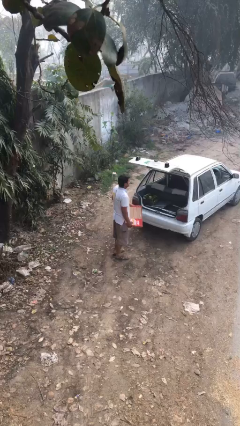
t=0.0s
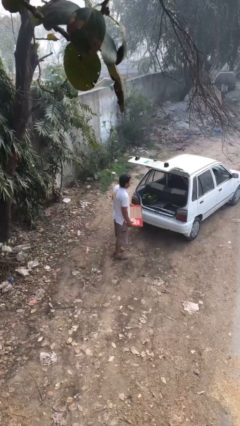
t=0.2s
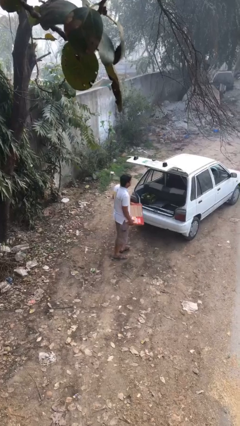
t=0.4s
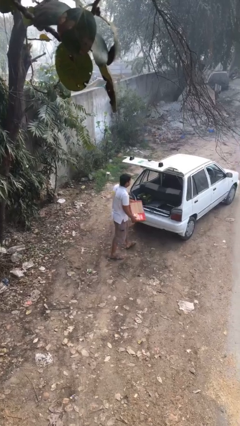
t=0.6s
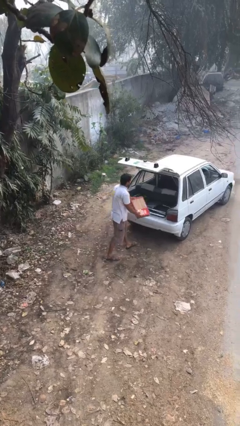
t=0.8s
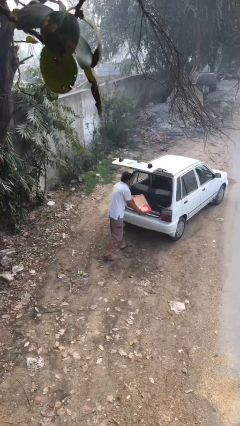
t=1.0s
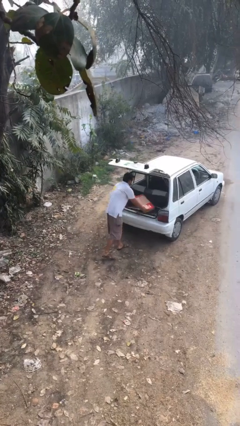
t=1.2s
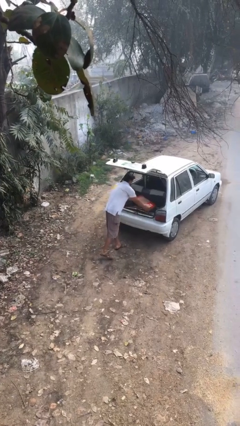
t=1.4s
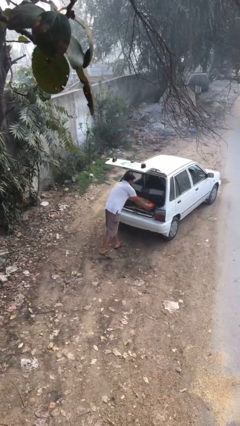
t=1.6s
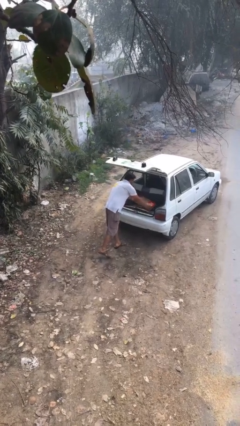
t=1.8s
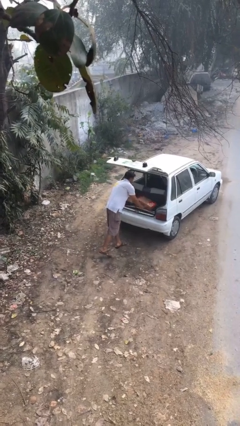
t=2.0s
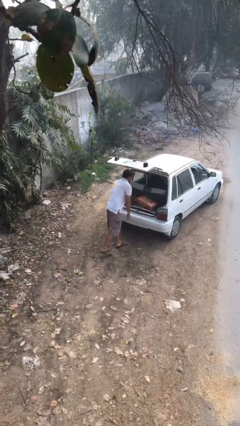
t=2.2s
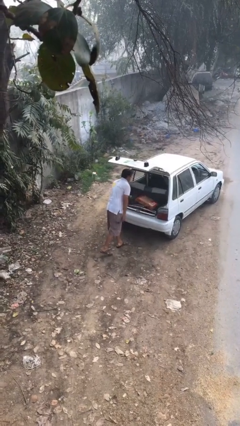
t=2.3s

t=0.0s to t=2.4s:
person loads car

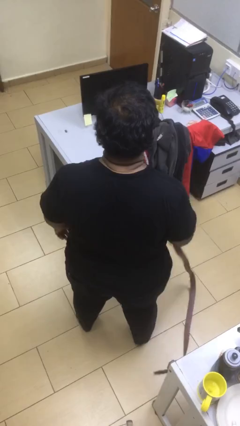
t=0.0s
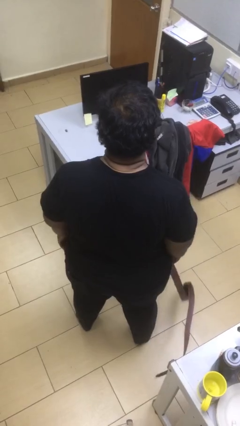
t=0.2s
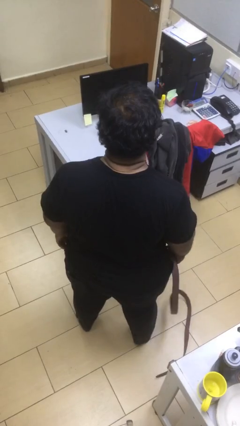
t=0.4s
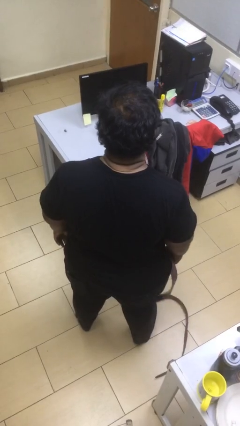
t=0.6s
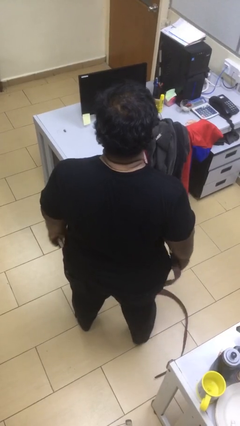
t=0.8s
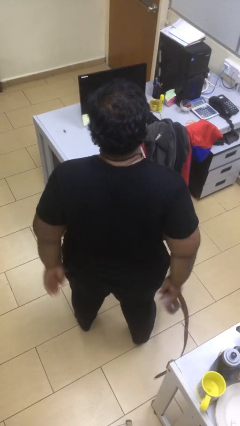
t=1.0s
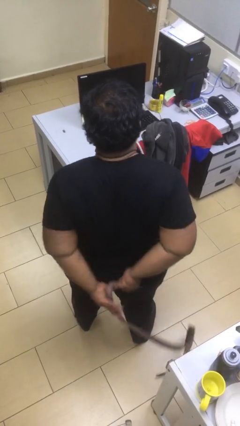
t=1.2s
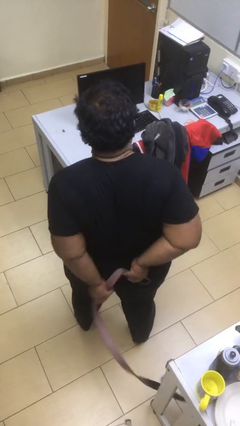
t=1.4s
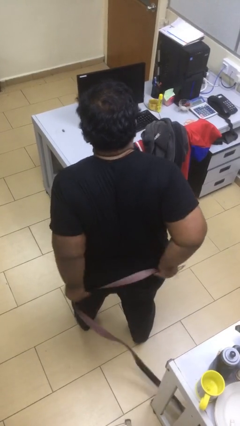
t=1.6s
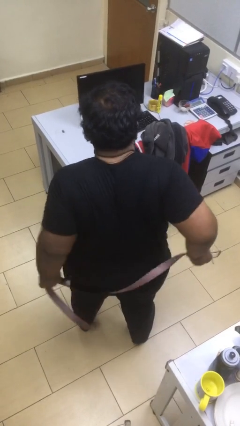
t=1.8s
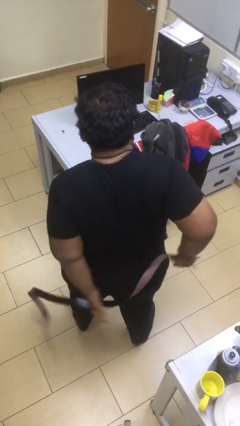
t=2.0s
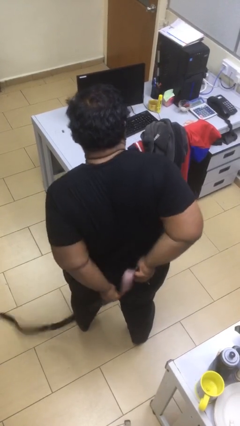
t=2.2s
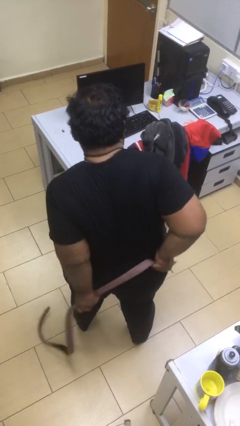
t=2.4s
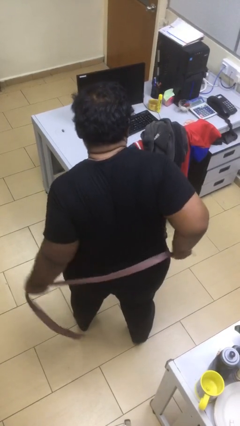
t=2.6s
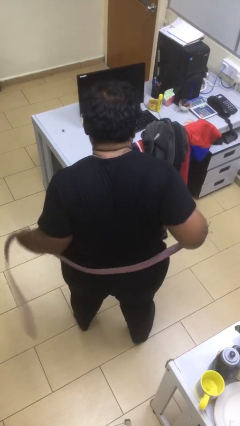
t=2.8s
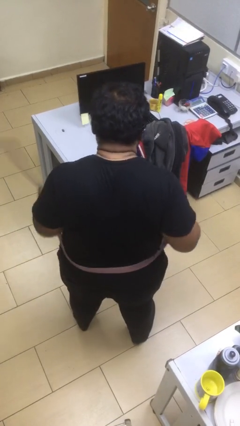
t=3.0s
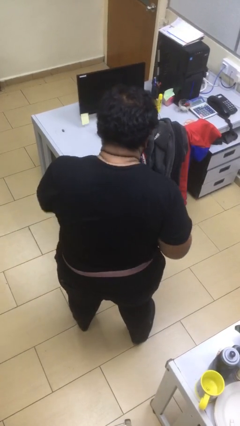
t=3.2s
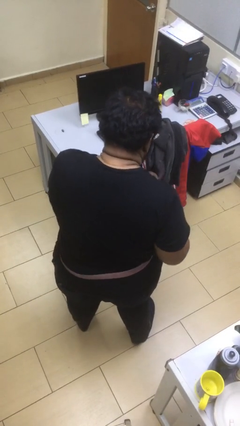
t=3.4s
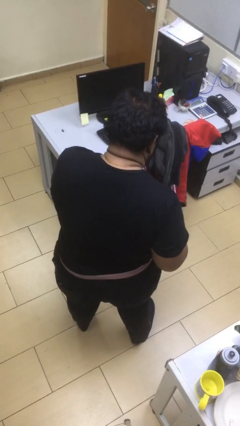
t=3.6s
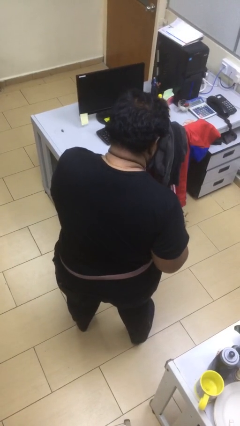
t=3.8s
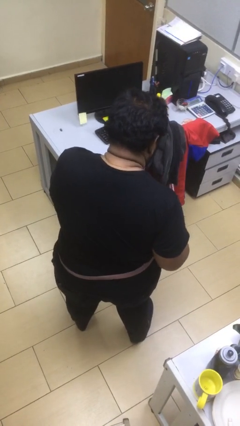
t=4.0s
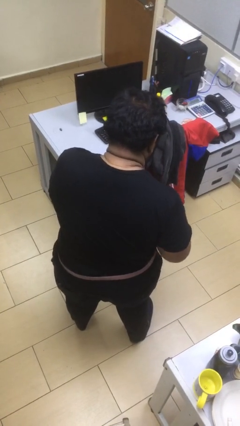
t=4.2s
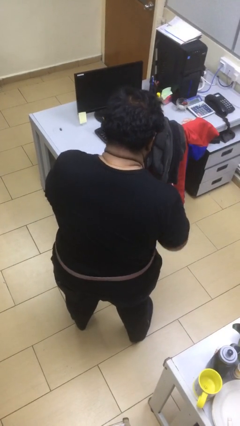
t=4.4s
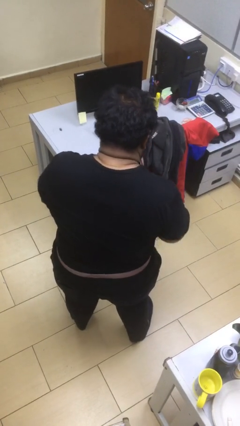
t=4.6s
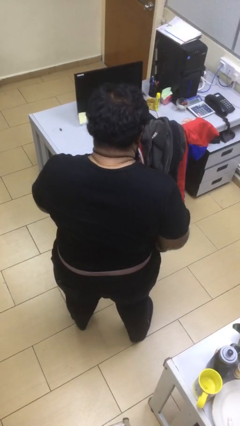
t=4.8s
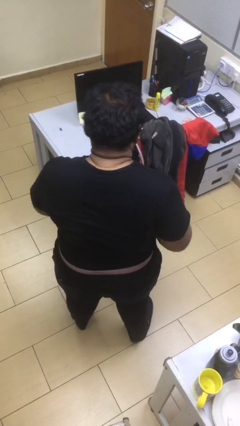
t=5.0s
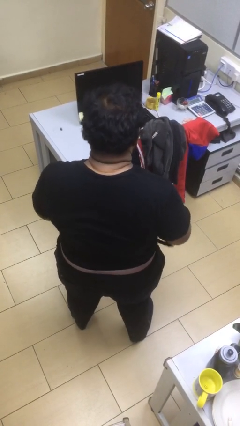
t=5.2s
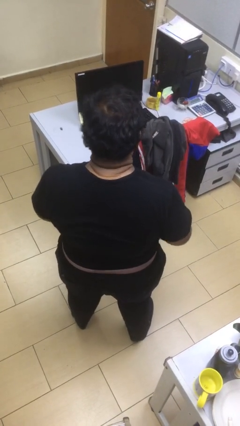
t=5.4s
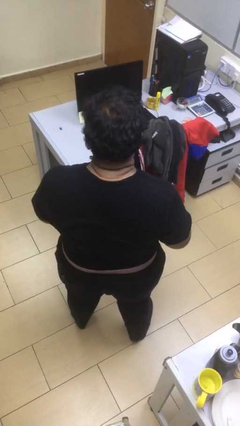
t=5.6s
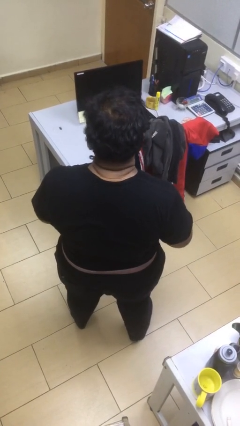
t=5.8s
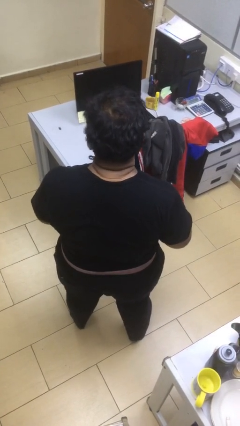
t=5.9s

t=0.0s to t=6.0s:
person puts on belt

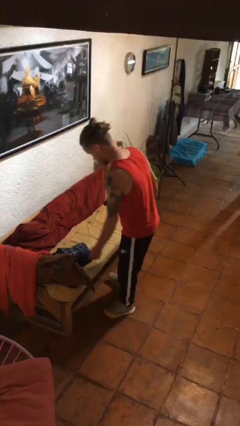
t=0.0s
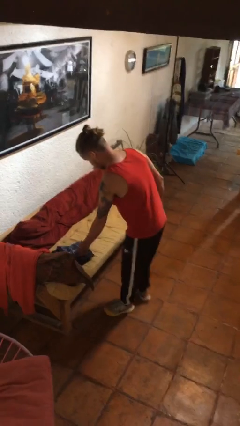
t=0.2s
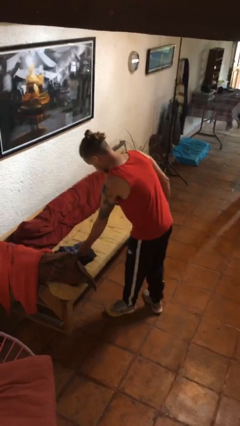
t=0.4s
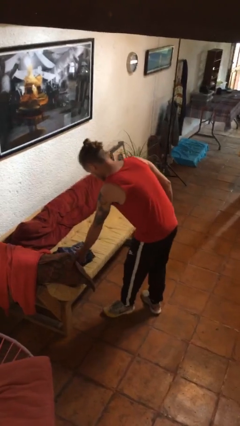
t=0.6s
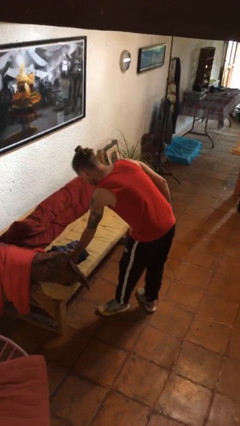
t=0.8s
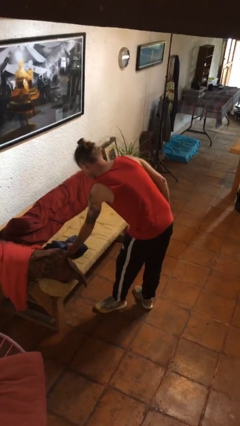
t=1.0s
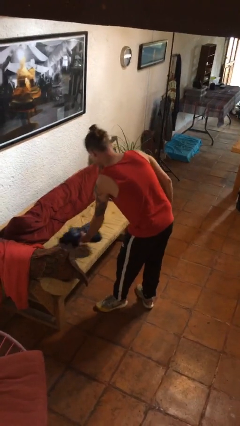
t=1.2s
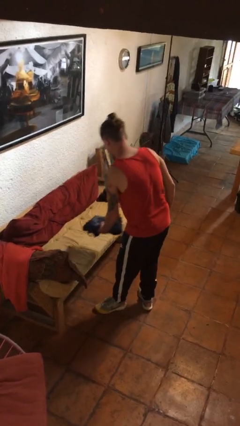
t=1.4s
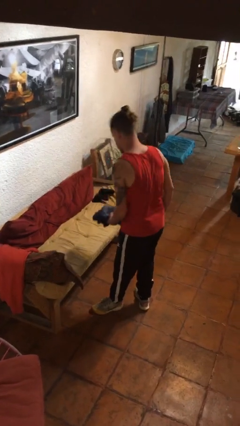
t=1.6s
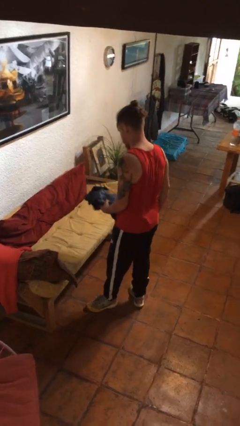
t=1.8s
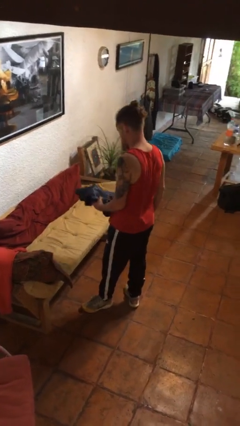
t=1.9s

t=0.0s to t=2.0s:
person picks up object from couch

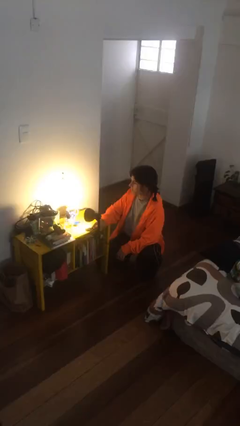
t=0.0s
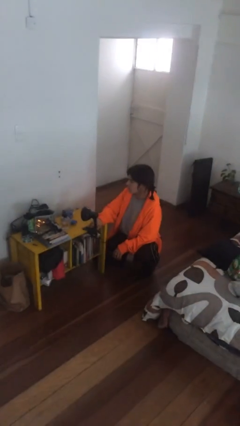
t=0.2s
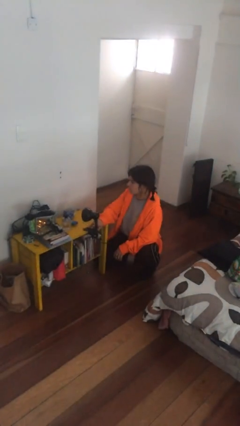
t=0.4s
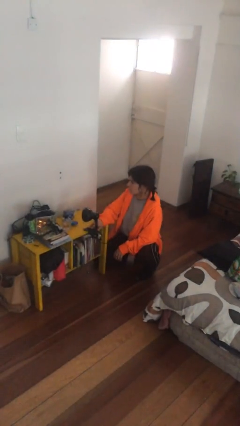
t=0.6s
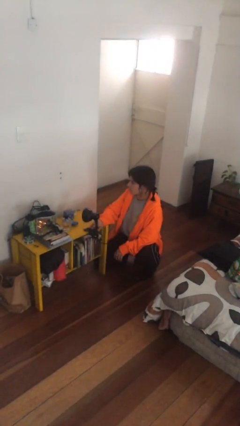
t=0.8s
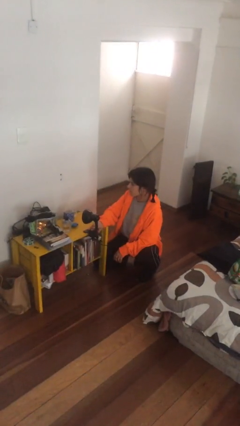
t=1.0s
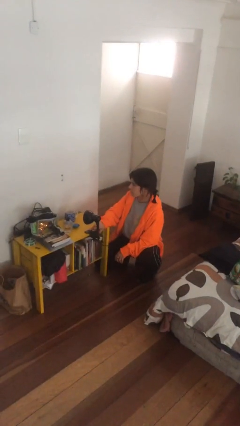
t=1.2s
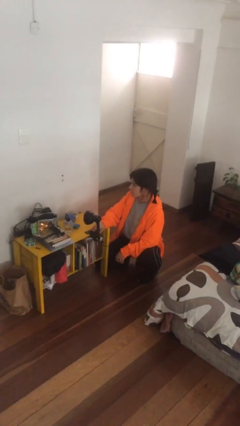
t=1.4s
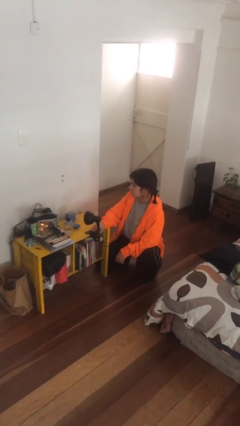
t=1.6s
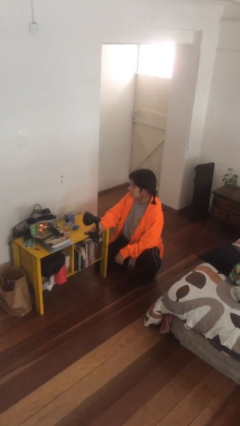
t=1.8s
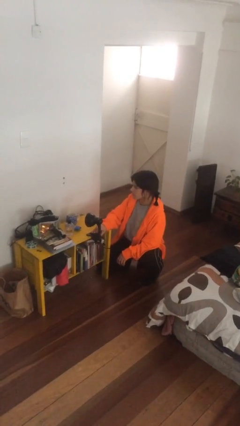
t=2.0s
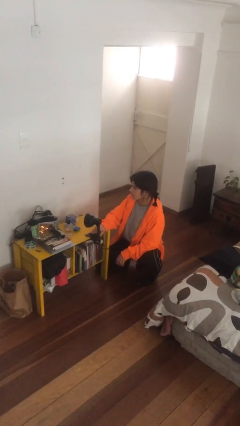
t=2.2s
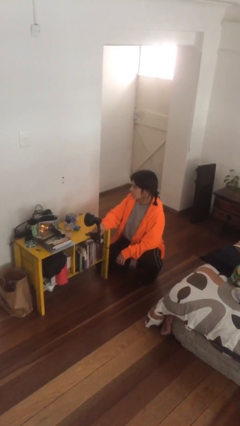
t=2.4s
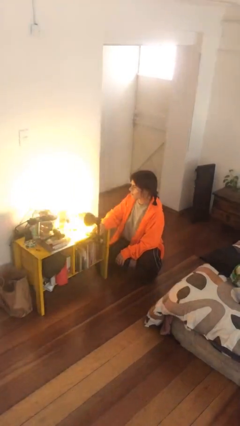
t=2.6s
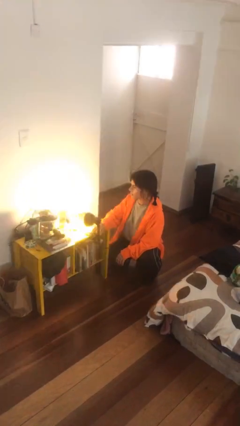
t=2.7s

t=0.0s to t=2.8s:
person turns off lamp

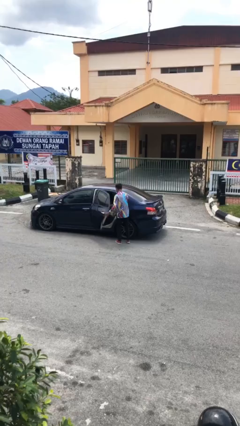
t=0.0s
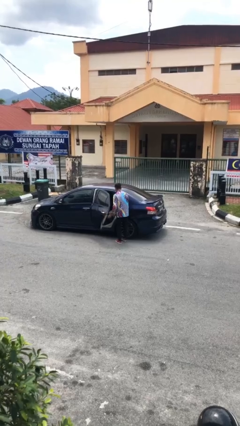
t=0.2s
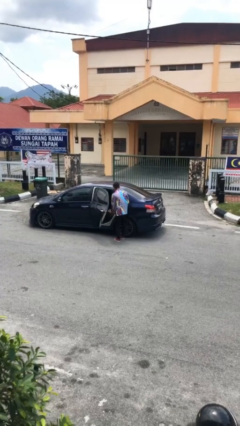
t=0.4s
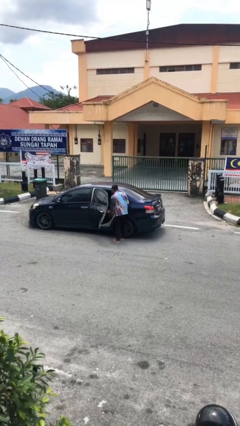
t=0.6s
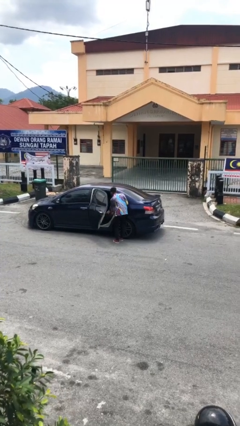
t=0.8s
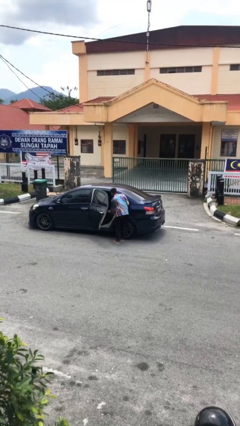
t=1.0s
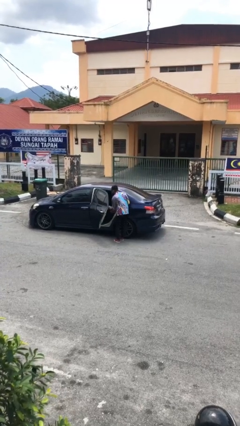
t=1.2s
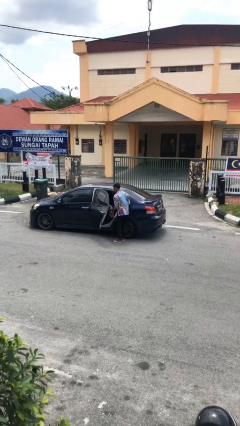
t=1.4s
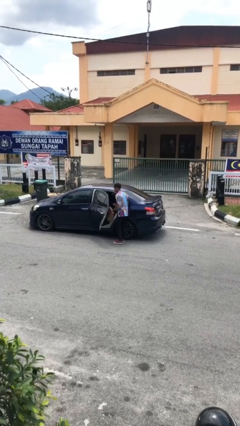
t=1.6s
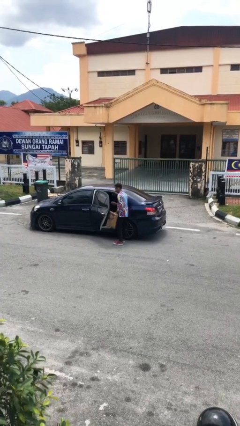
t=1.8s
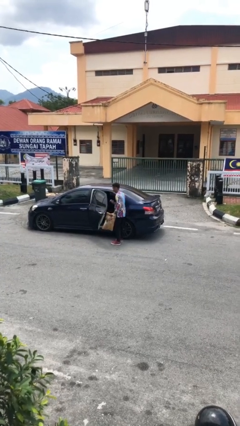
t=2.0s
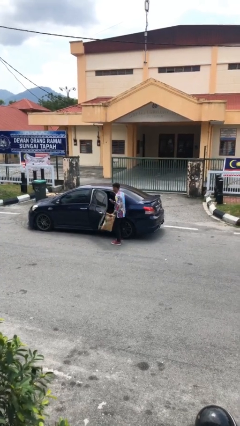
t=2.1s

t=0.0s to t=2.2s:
person unloads car

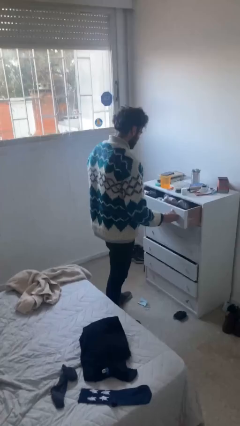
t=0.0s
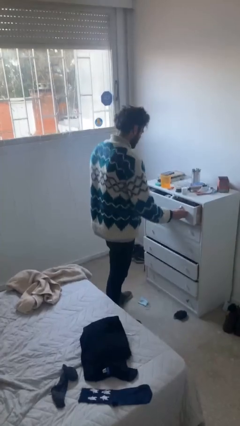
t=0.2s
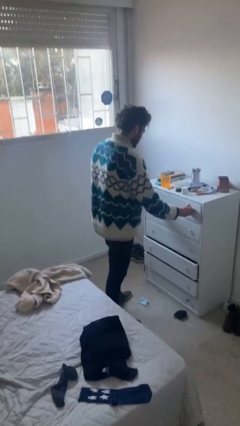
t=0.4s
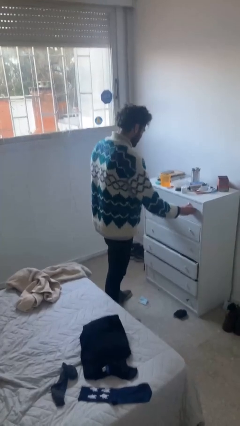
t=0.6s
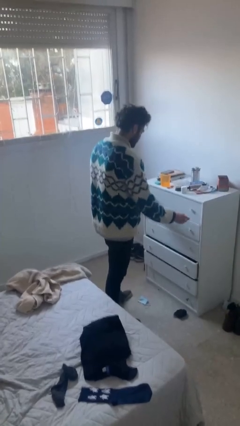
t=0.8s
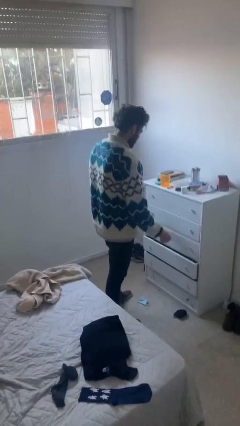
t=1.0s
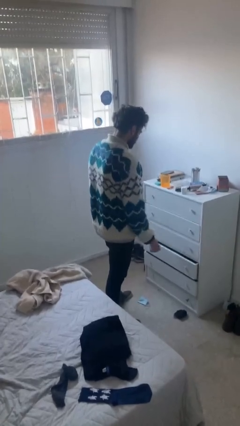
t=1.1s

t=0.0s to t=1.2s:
person closes dresser drawer

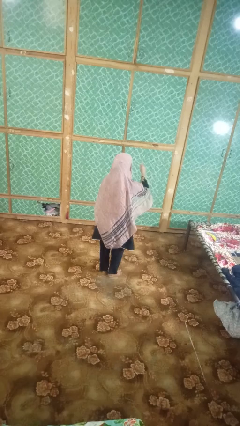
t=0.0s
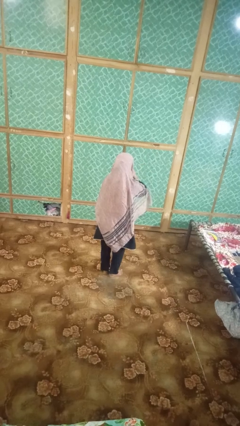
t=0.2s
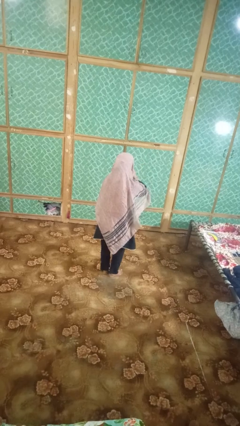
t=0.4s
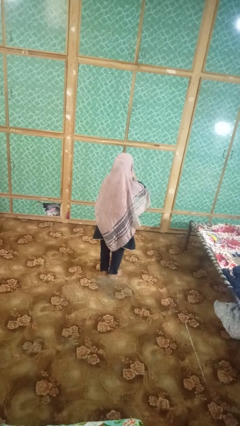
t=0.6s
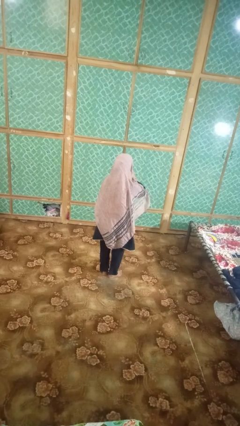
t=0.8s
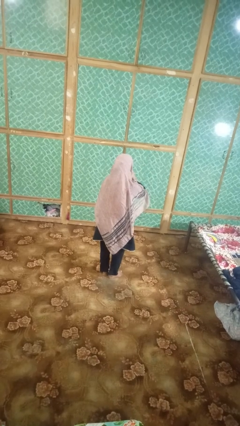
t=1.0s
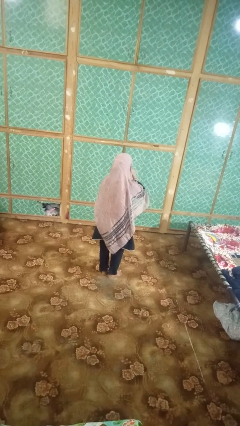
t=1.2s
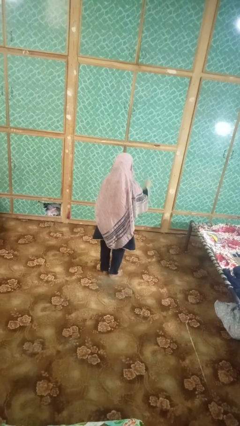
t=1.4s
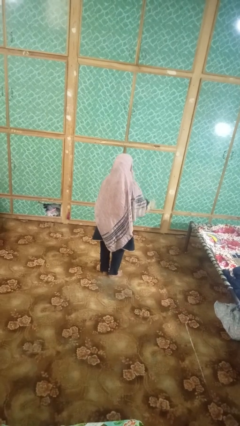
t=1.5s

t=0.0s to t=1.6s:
person gestures be quiet
